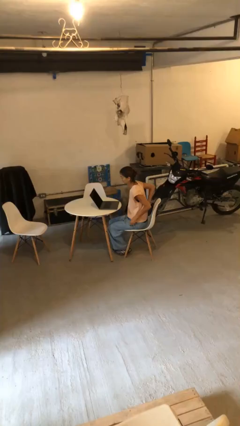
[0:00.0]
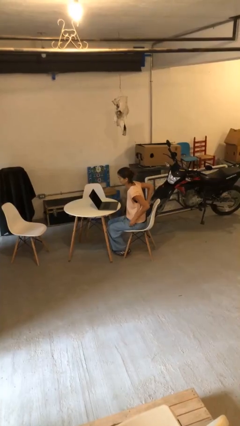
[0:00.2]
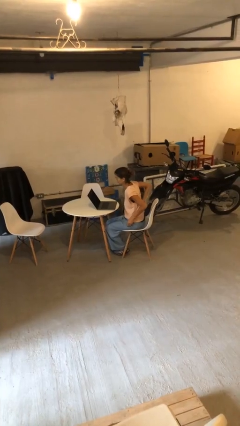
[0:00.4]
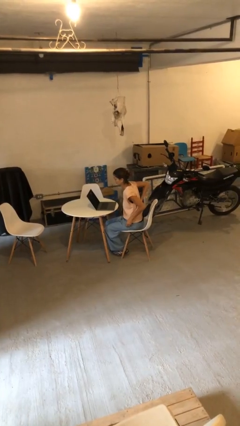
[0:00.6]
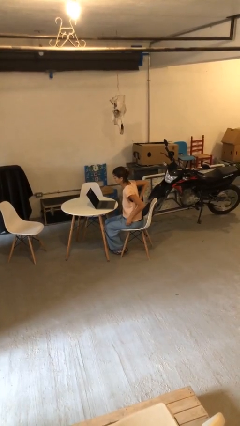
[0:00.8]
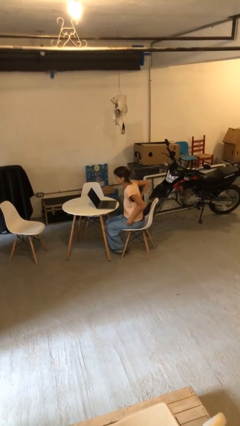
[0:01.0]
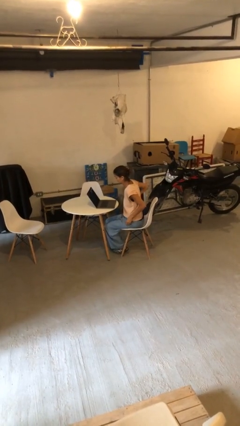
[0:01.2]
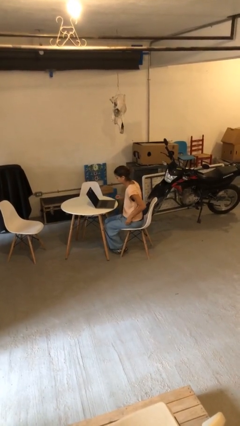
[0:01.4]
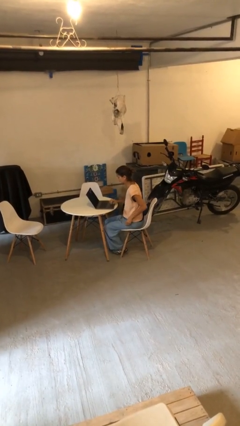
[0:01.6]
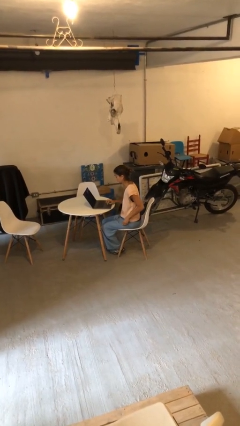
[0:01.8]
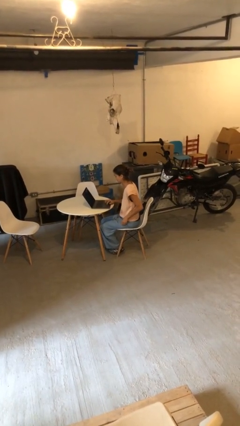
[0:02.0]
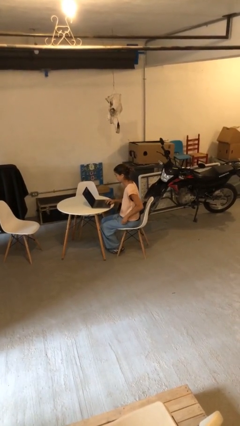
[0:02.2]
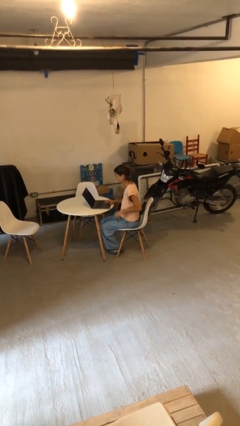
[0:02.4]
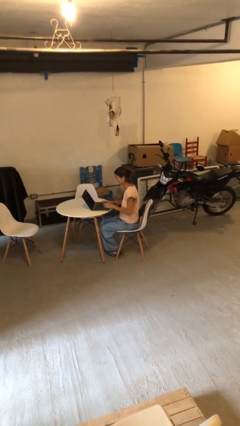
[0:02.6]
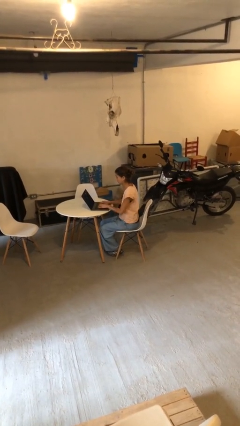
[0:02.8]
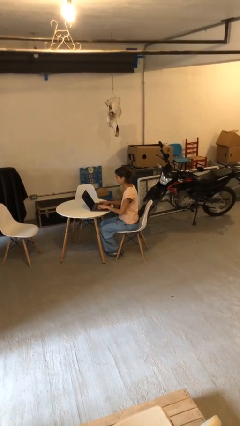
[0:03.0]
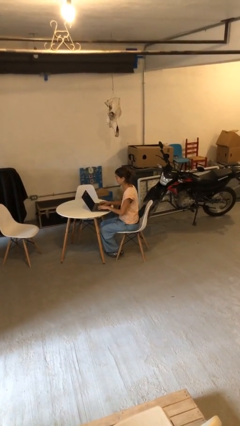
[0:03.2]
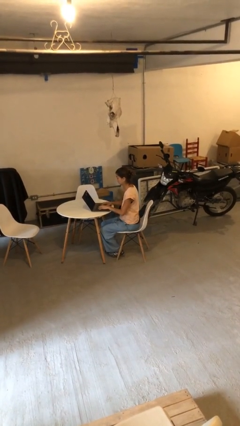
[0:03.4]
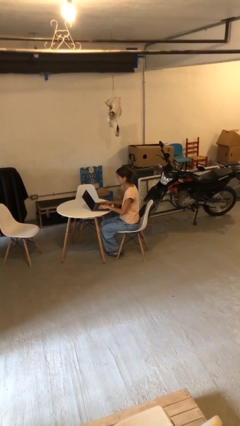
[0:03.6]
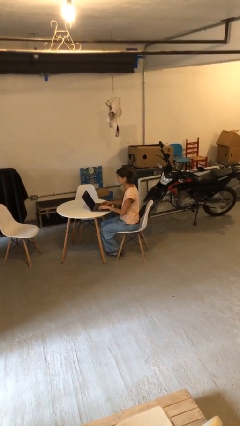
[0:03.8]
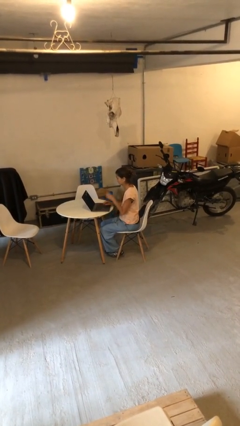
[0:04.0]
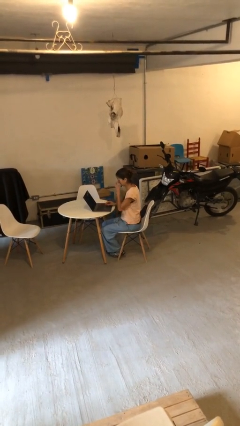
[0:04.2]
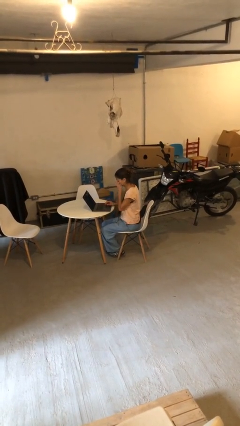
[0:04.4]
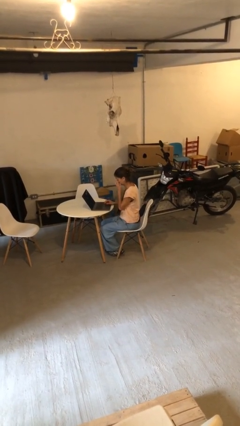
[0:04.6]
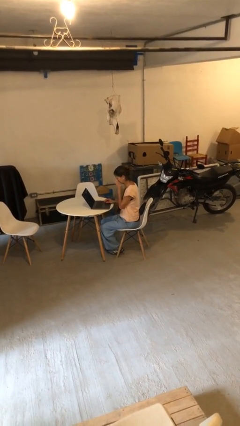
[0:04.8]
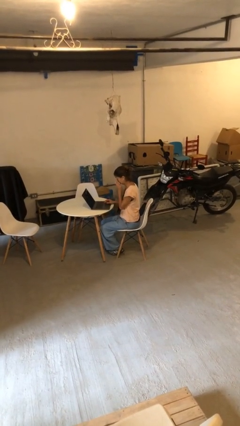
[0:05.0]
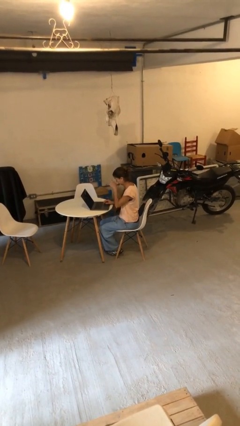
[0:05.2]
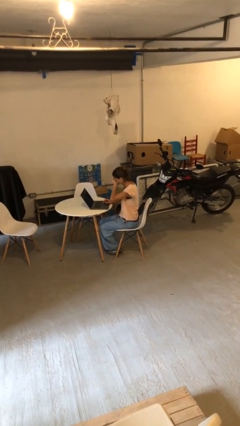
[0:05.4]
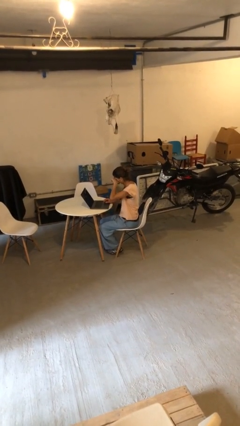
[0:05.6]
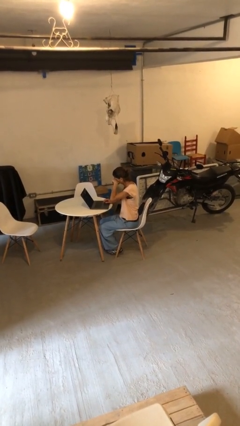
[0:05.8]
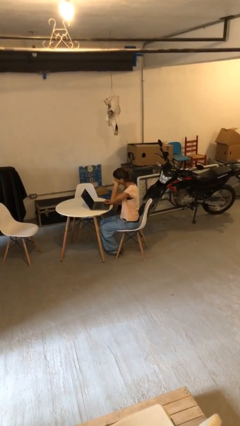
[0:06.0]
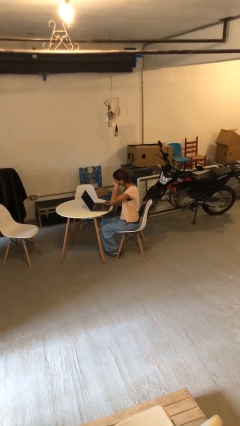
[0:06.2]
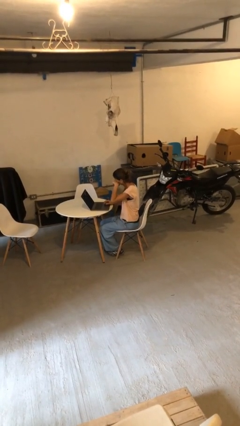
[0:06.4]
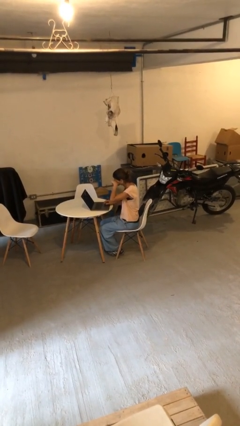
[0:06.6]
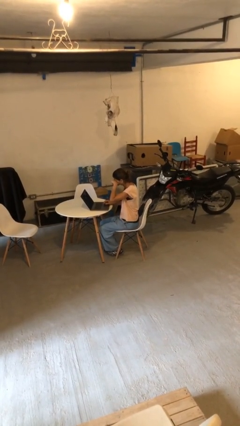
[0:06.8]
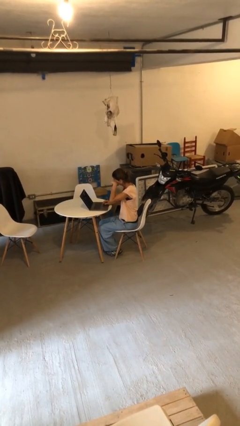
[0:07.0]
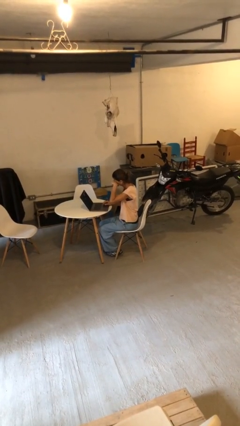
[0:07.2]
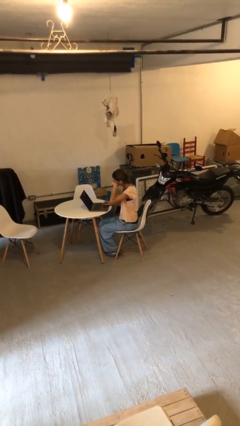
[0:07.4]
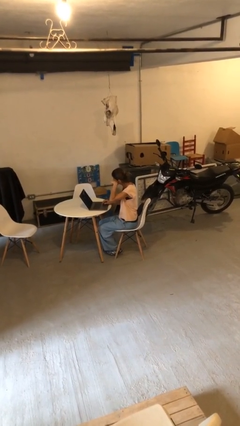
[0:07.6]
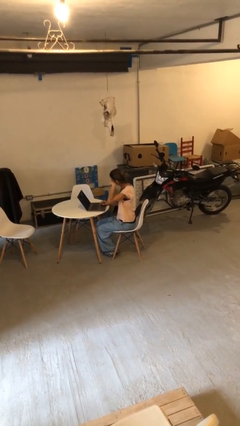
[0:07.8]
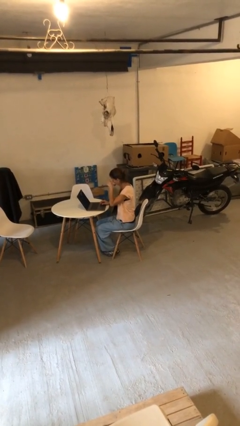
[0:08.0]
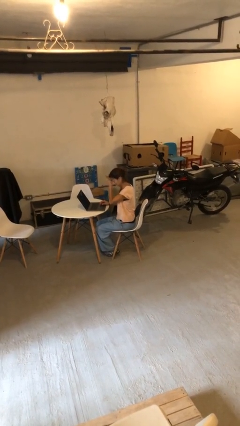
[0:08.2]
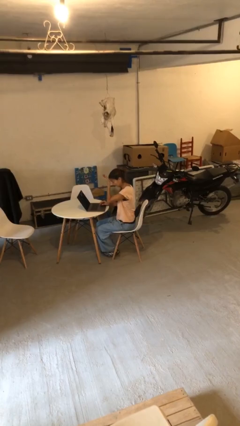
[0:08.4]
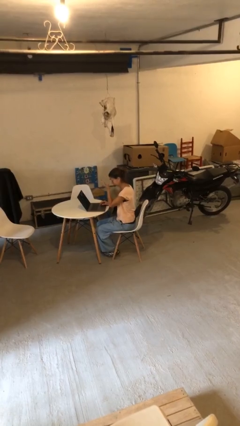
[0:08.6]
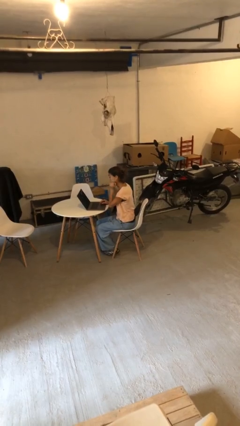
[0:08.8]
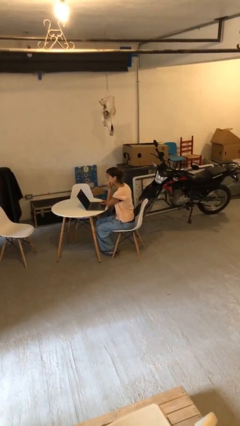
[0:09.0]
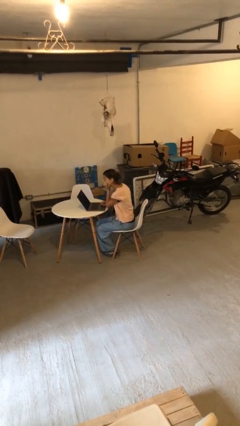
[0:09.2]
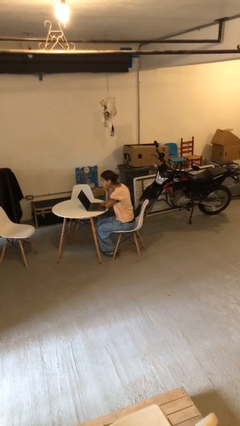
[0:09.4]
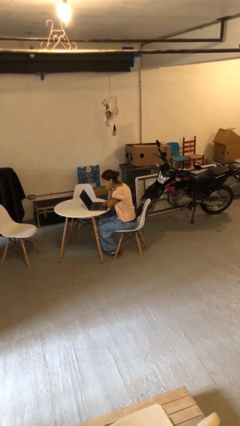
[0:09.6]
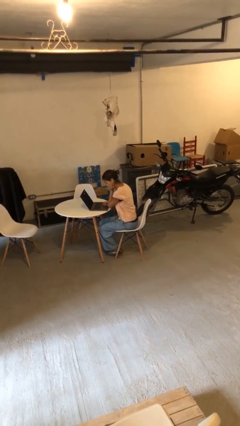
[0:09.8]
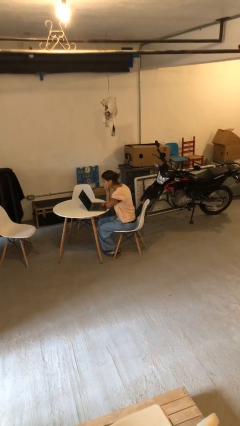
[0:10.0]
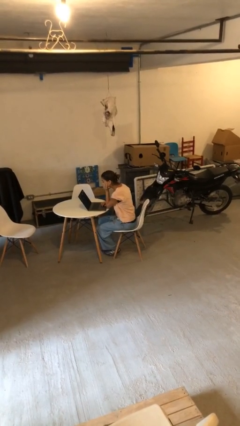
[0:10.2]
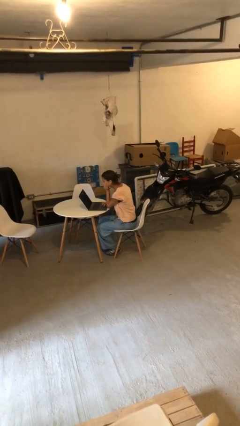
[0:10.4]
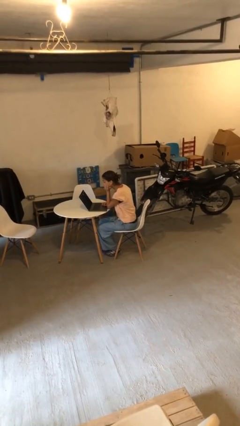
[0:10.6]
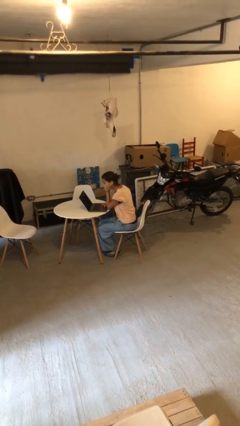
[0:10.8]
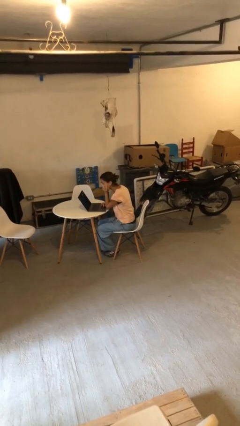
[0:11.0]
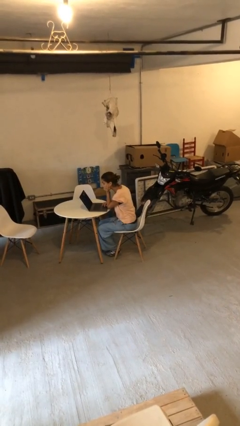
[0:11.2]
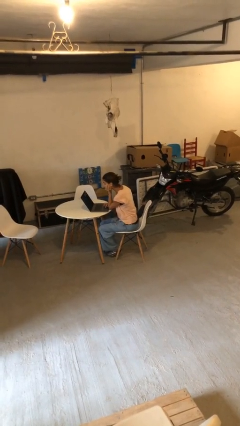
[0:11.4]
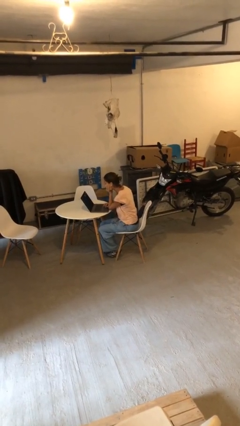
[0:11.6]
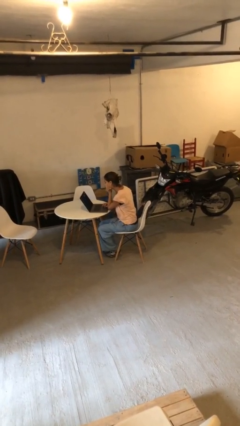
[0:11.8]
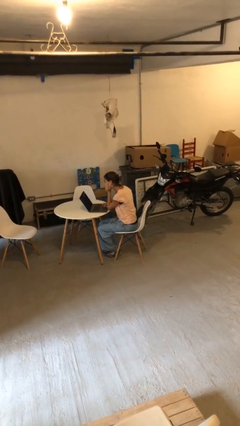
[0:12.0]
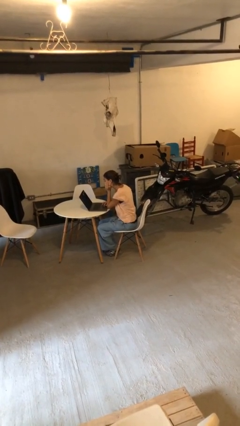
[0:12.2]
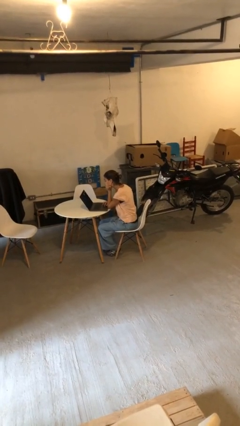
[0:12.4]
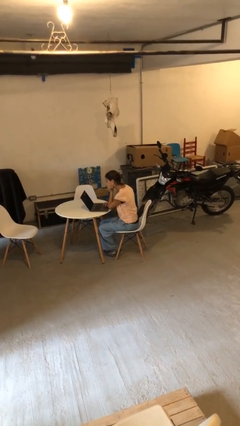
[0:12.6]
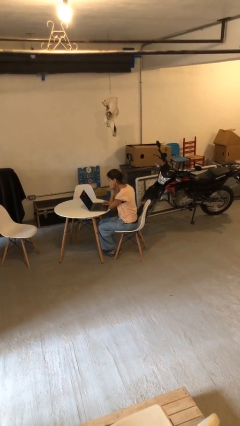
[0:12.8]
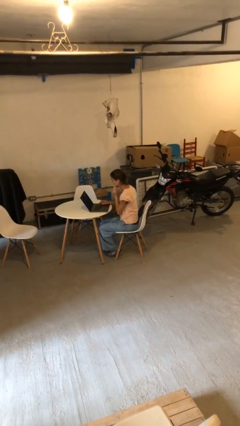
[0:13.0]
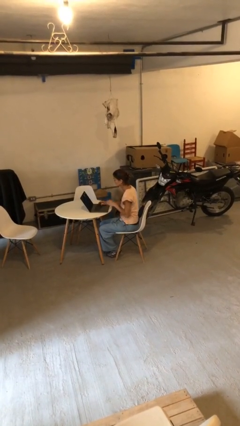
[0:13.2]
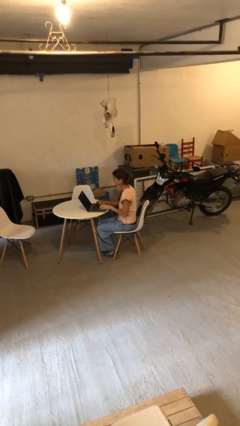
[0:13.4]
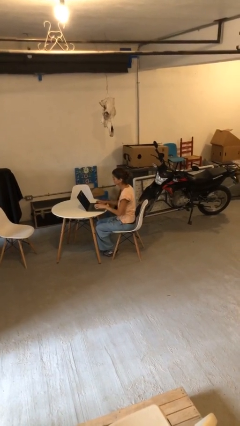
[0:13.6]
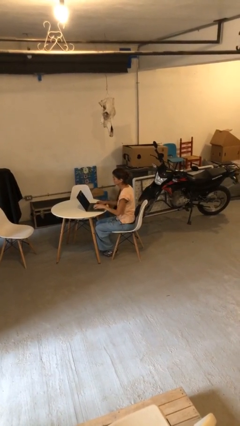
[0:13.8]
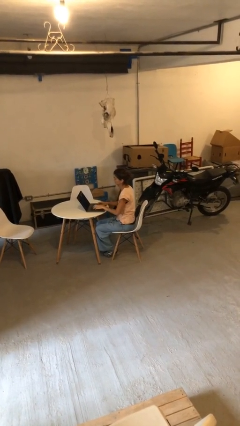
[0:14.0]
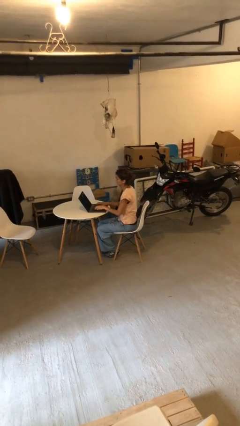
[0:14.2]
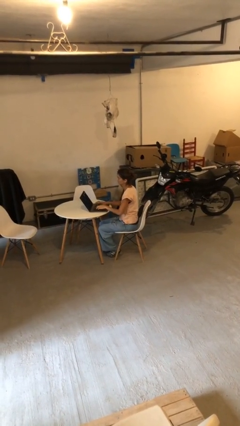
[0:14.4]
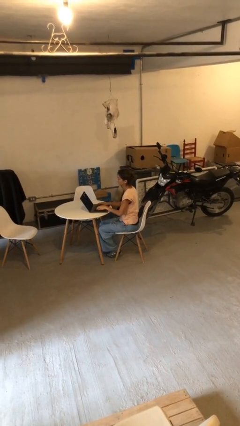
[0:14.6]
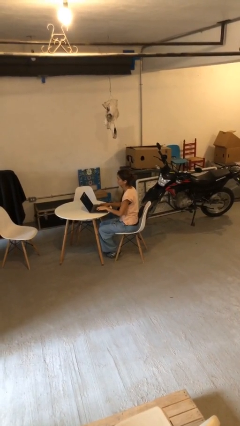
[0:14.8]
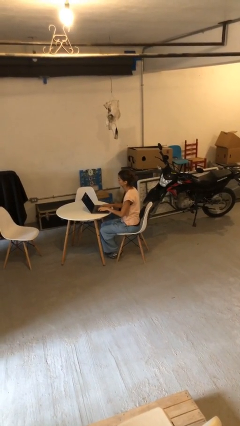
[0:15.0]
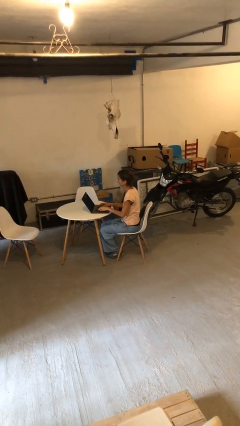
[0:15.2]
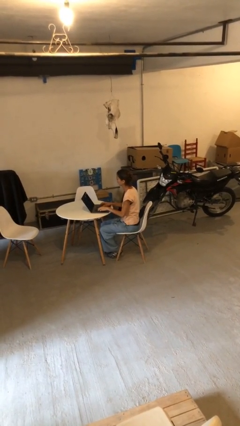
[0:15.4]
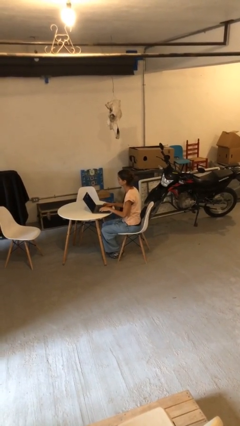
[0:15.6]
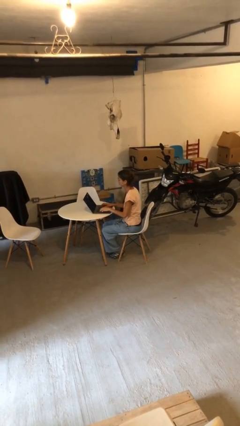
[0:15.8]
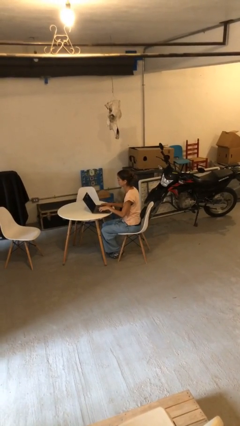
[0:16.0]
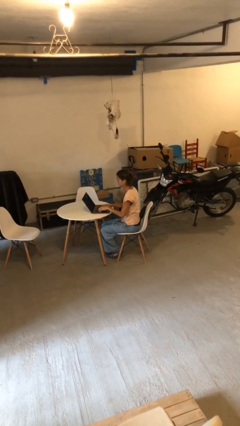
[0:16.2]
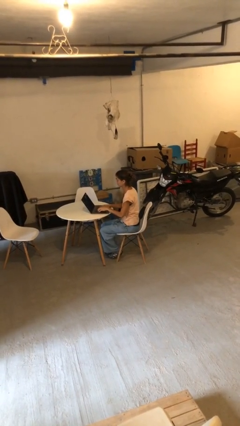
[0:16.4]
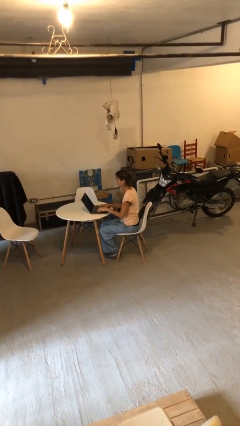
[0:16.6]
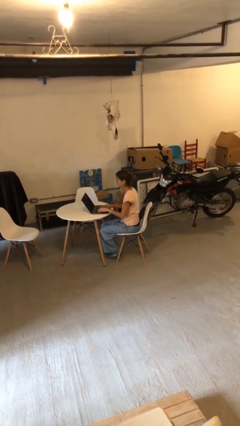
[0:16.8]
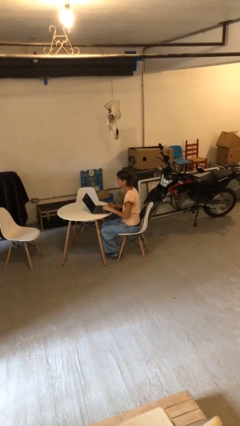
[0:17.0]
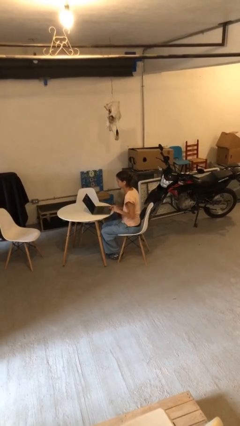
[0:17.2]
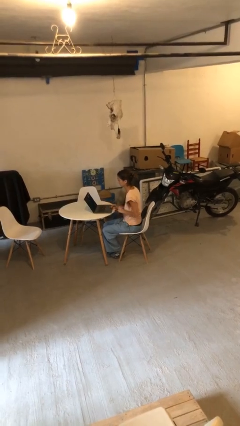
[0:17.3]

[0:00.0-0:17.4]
person interacts with laptop

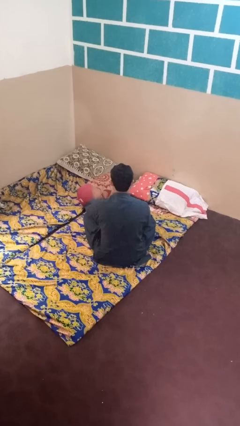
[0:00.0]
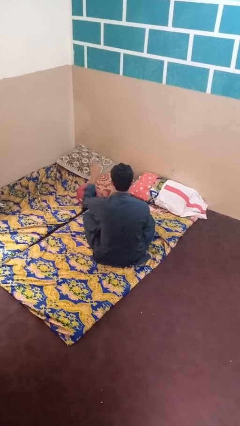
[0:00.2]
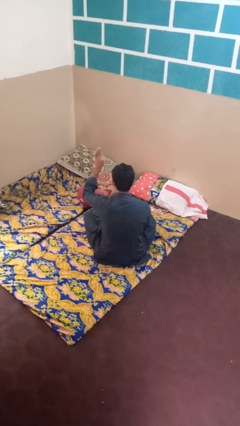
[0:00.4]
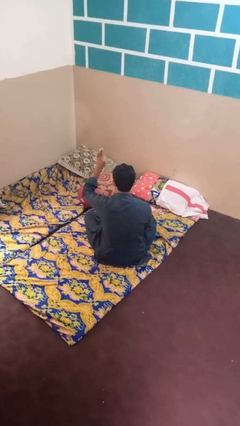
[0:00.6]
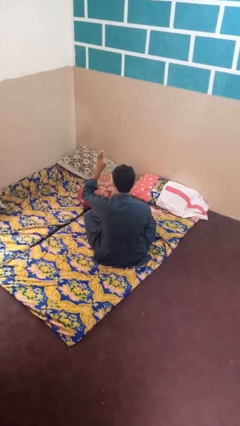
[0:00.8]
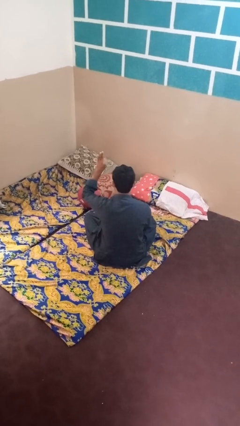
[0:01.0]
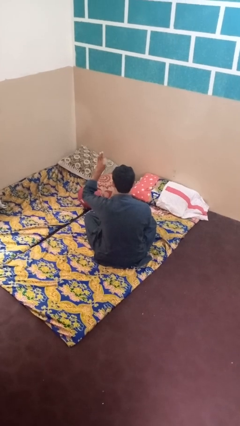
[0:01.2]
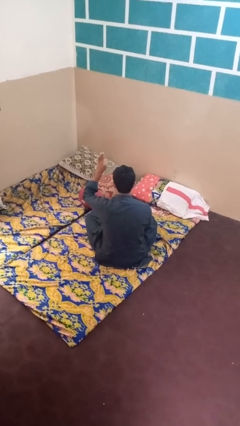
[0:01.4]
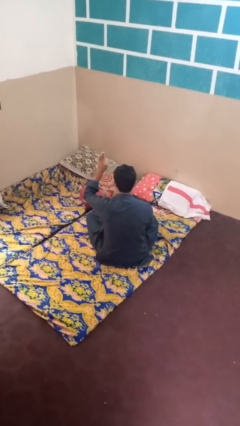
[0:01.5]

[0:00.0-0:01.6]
person gestures number three
